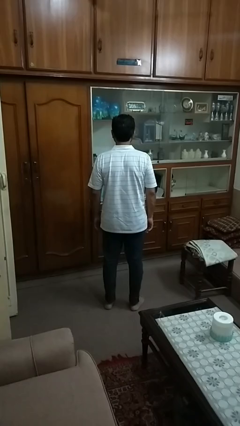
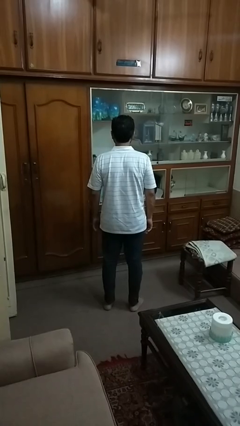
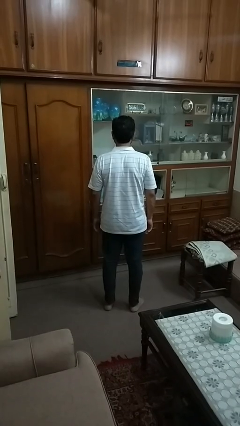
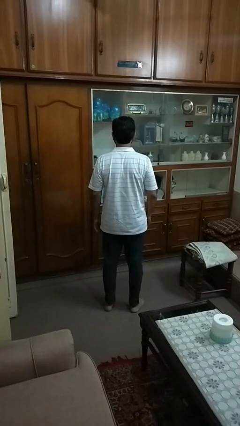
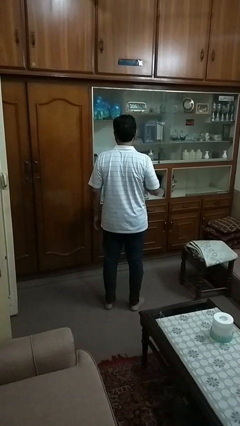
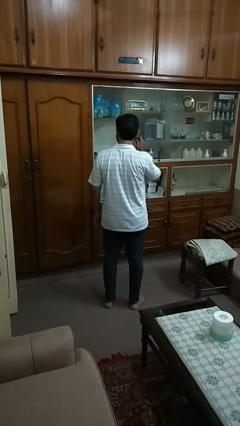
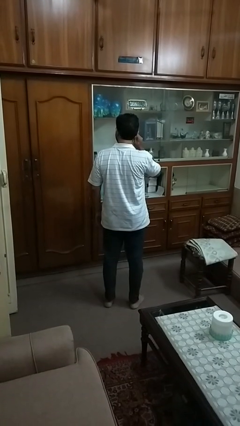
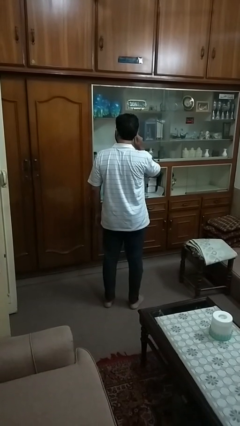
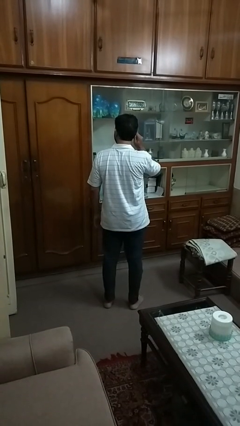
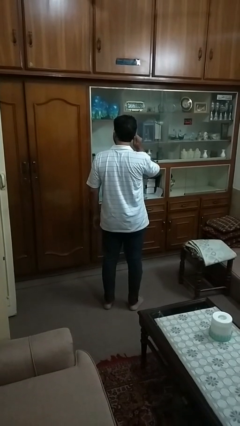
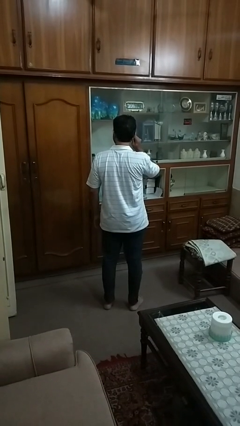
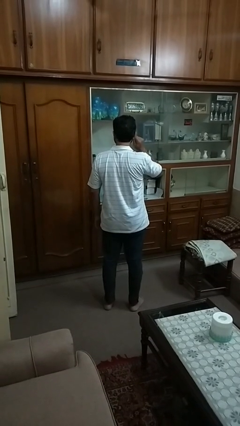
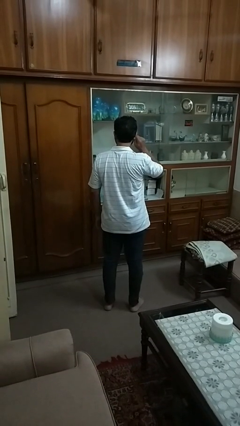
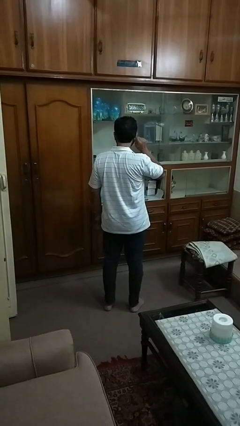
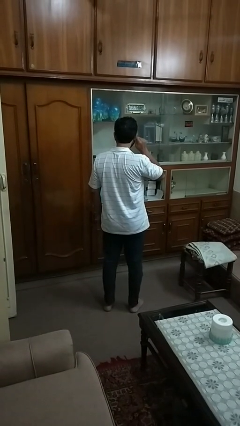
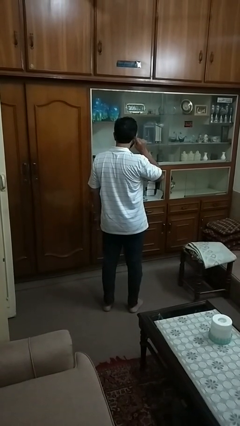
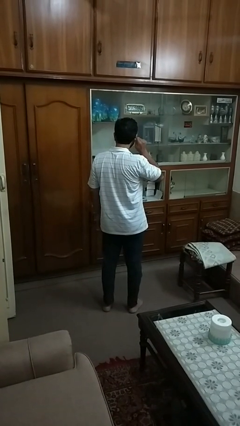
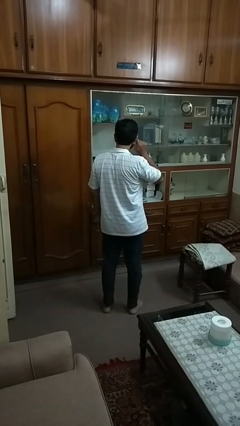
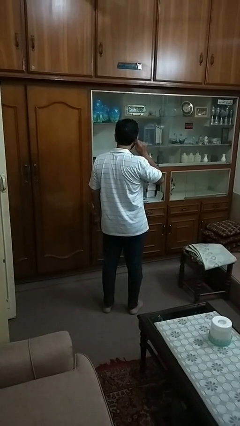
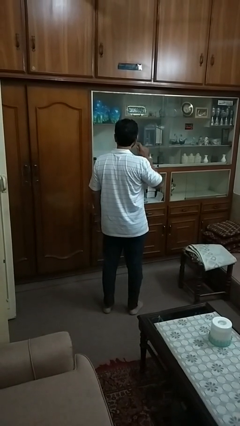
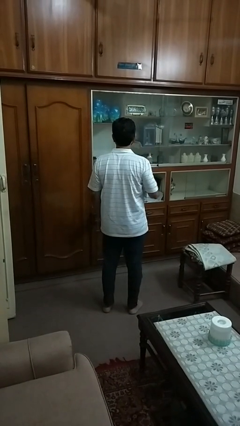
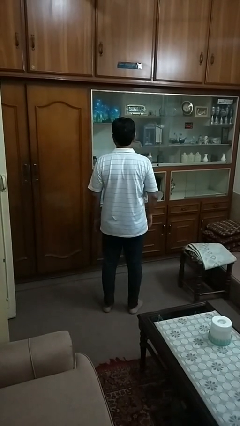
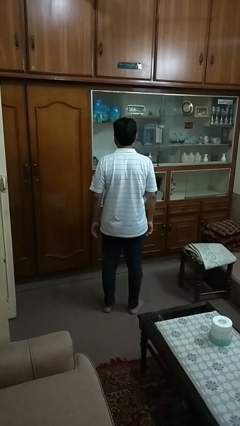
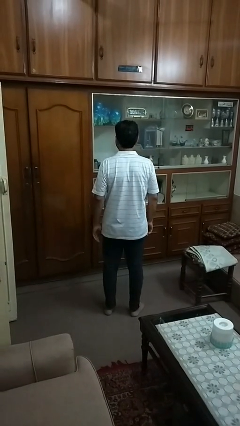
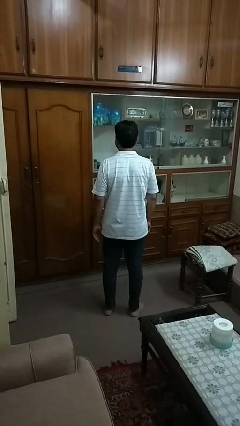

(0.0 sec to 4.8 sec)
person touches earlobe

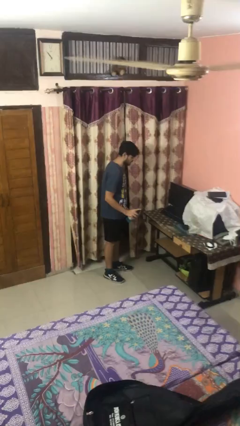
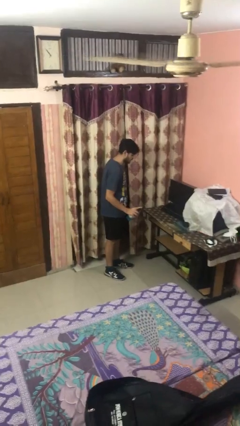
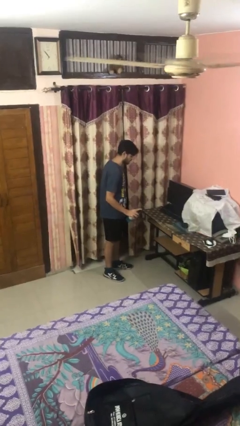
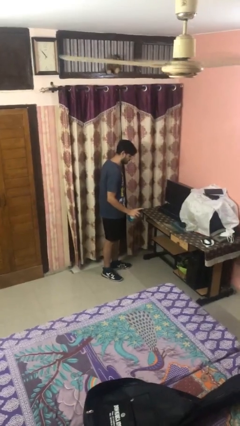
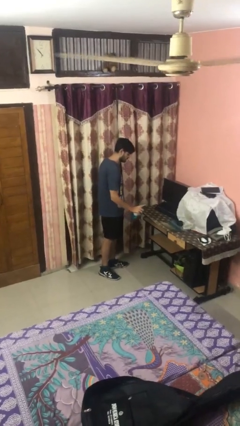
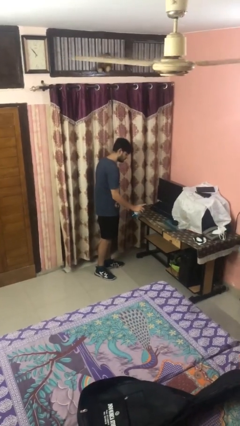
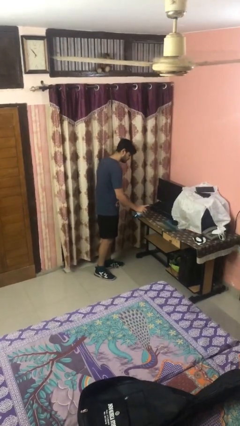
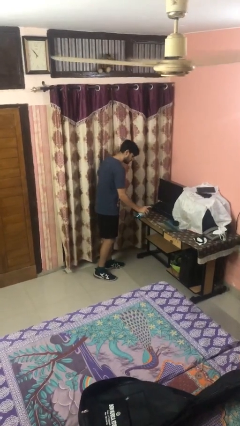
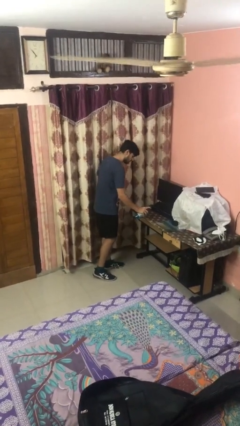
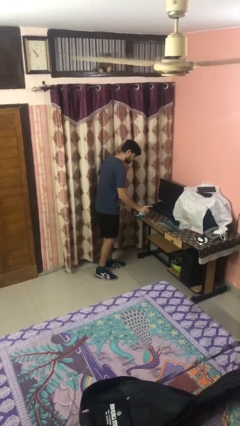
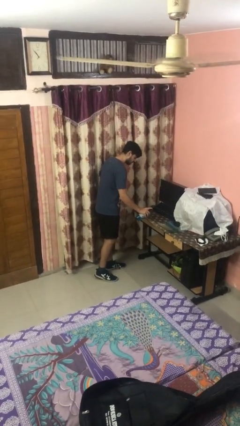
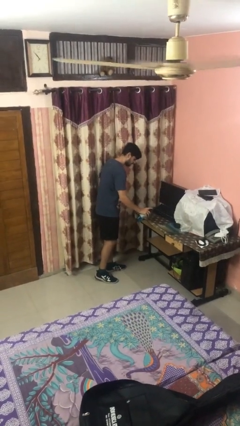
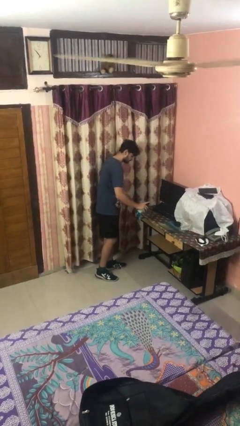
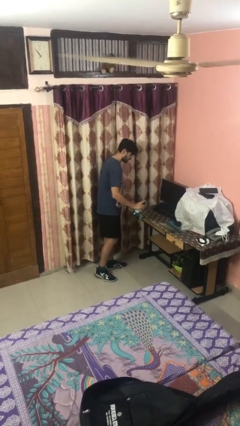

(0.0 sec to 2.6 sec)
person sprays from bottle

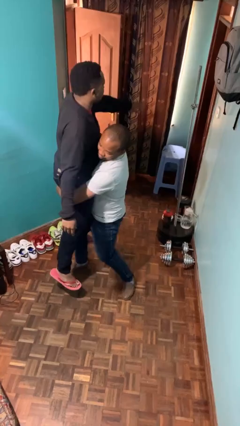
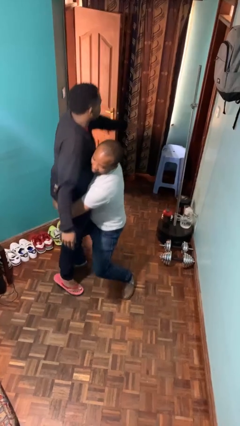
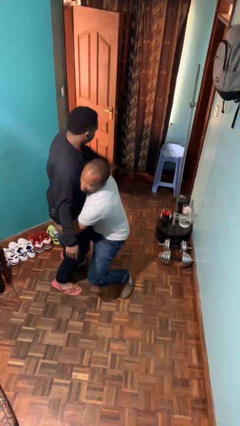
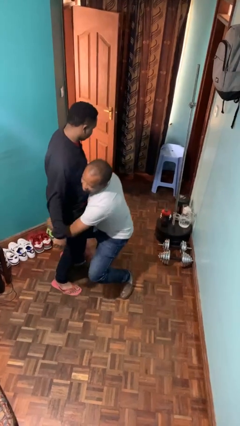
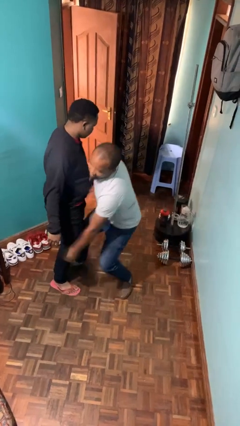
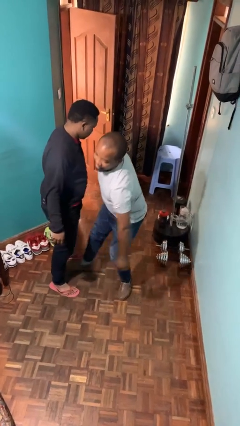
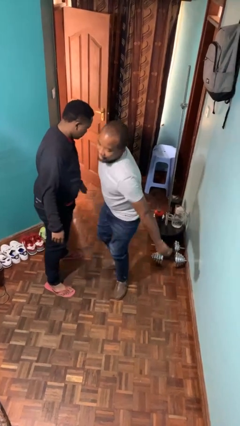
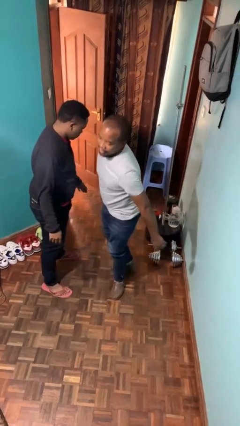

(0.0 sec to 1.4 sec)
person puts down person

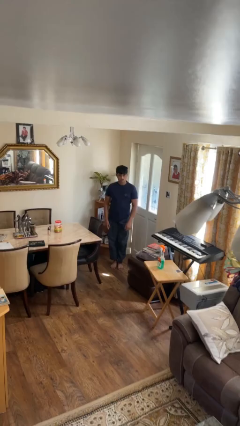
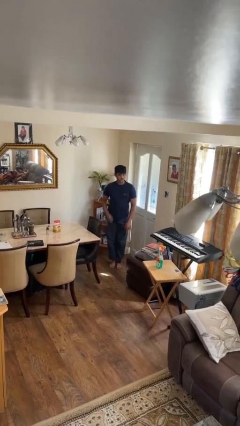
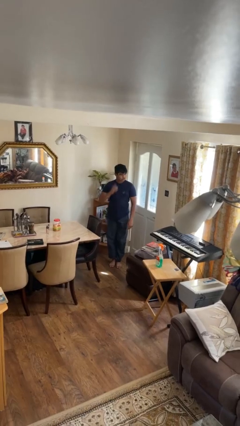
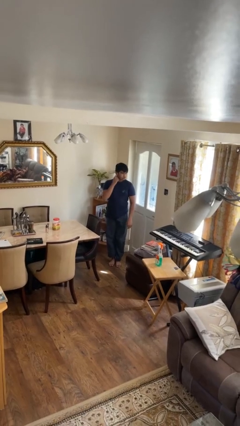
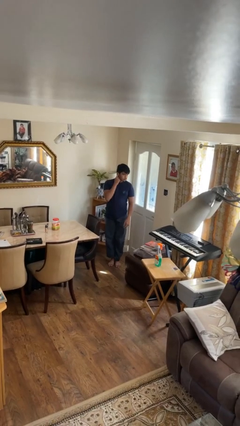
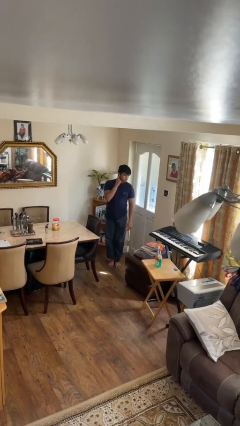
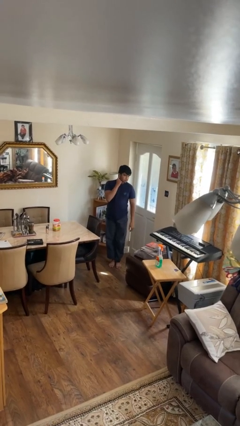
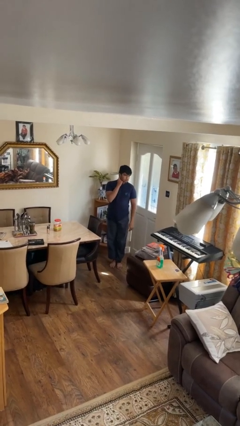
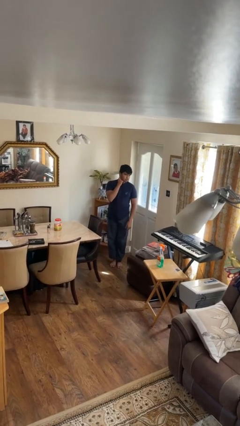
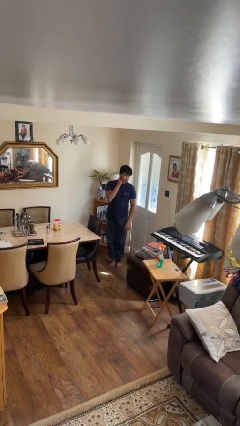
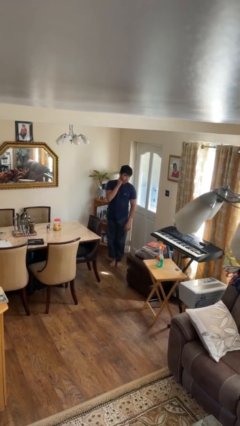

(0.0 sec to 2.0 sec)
person puts fingers in ear

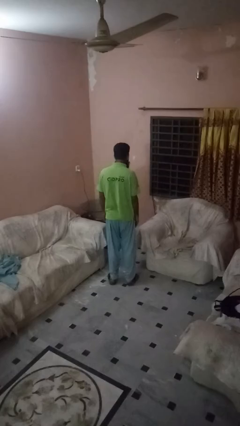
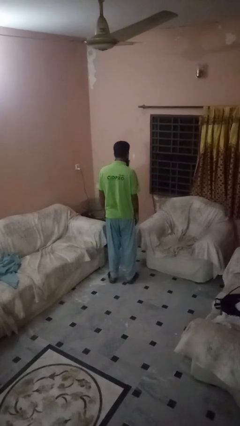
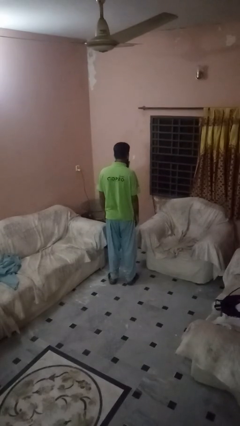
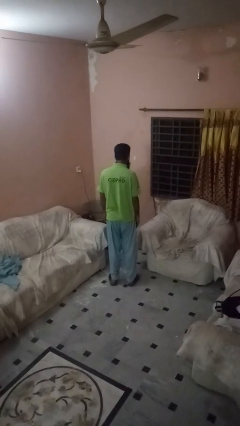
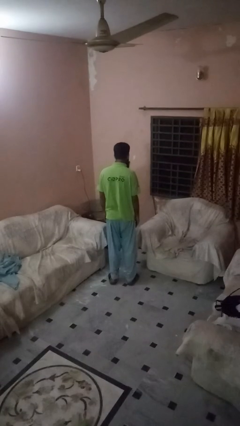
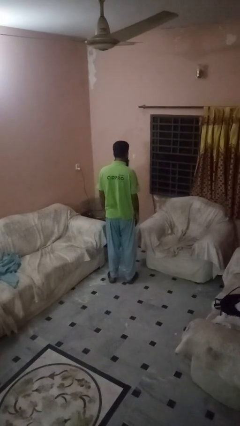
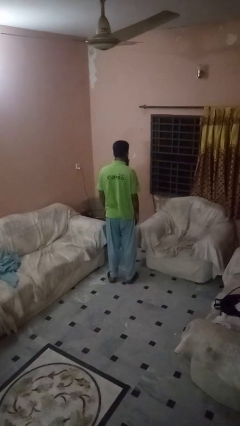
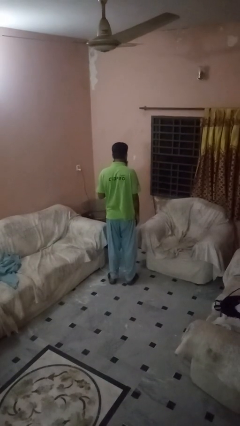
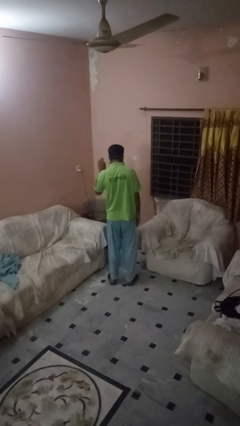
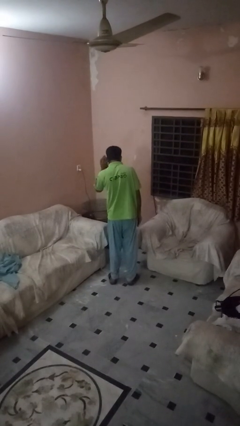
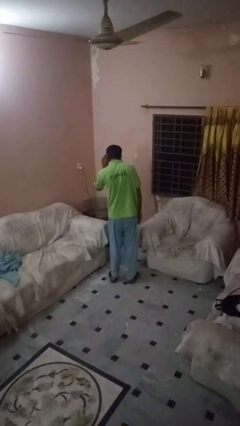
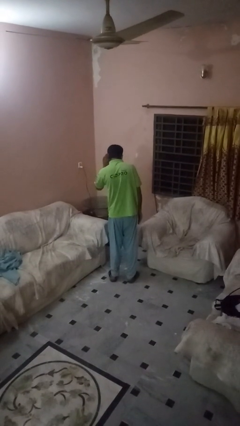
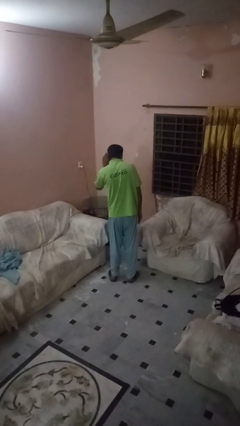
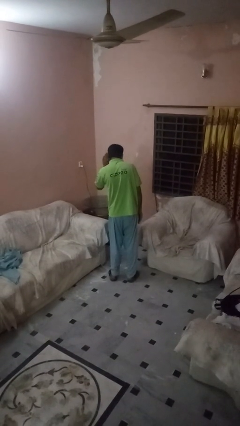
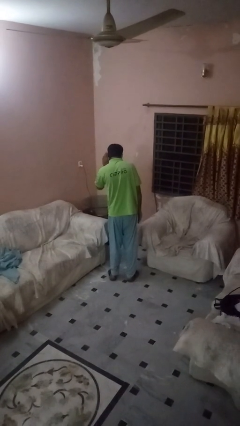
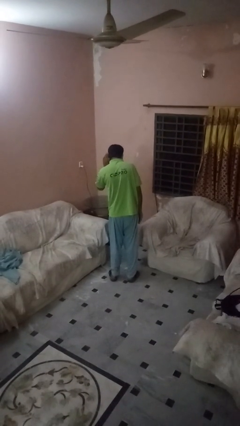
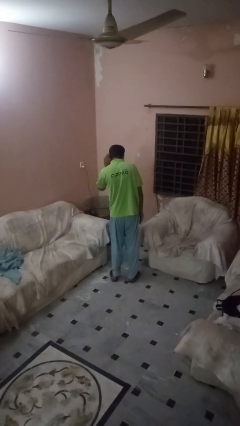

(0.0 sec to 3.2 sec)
person gestures listen closely

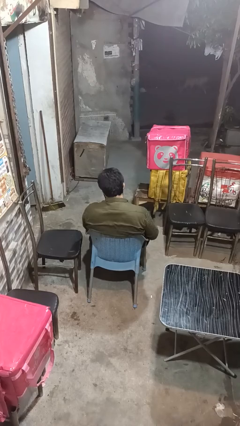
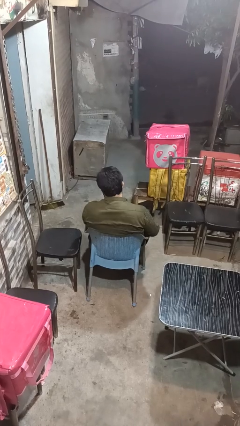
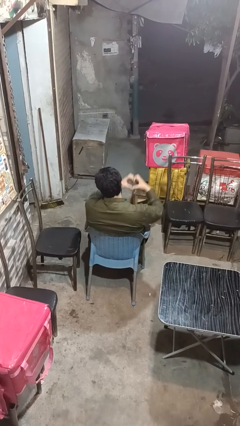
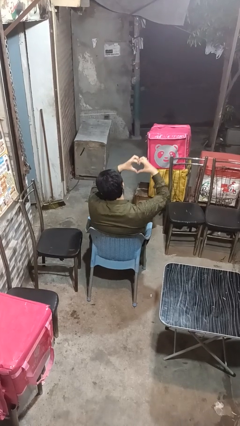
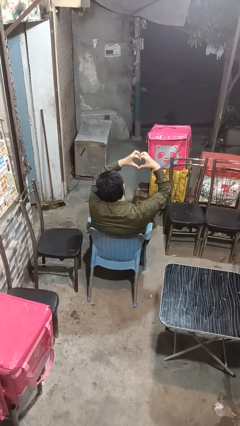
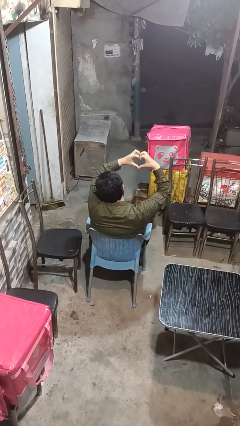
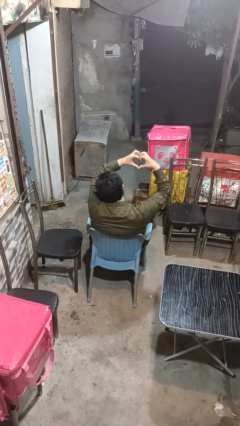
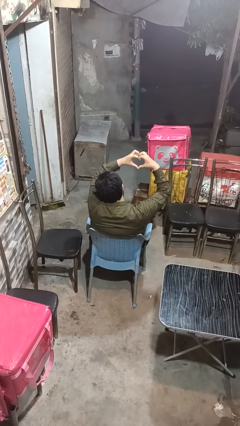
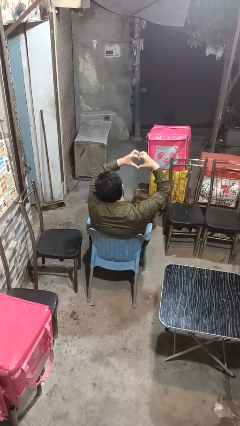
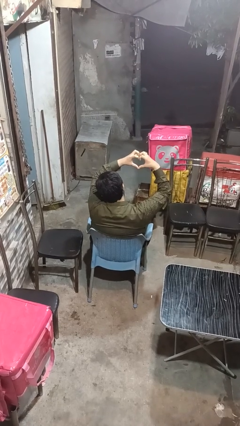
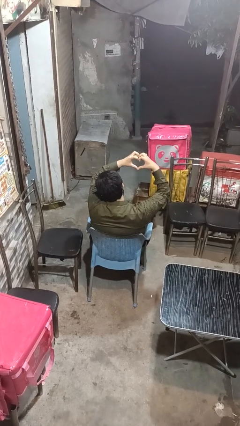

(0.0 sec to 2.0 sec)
person gestures heart

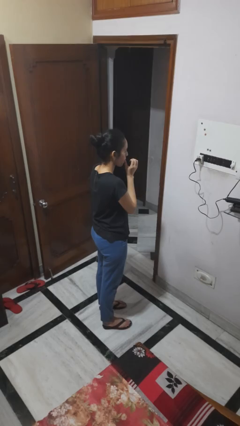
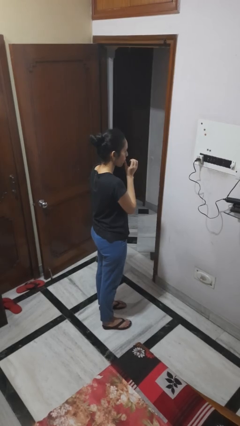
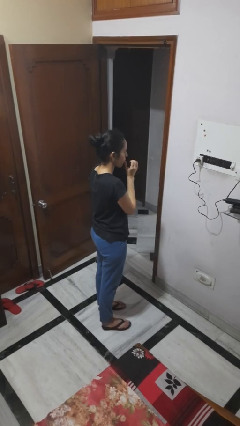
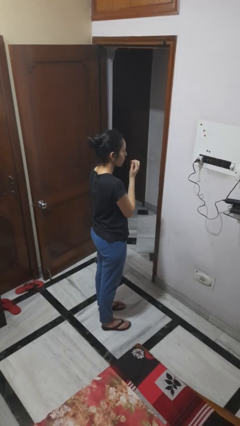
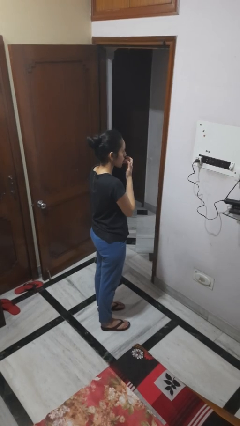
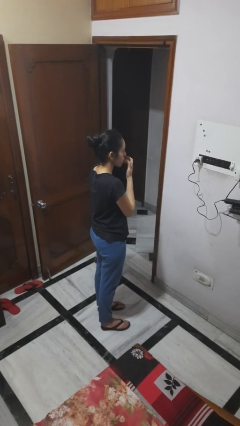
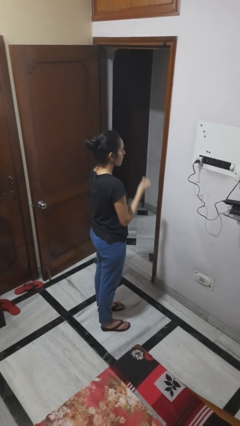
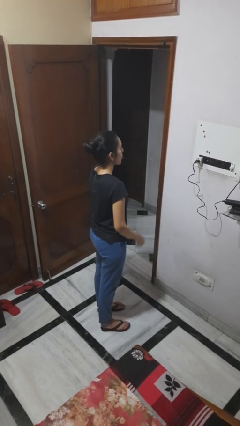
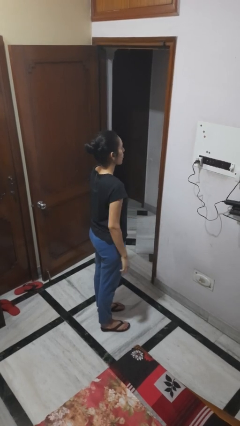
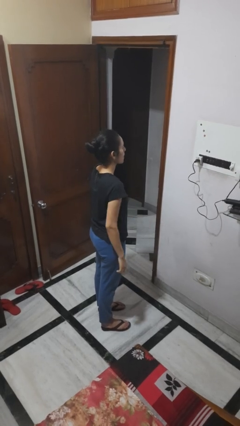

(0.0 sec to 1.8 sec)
person licks fingers
